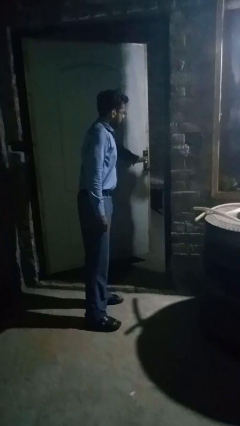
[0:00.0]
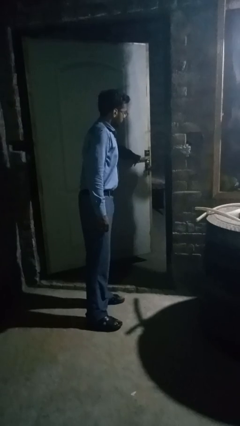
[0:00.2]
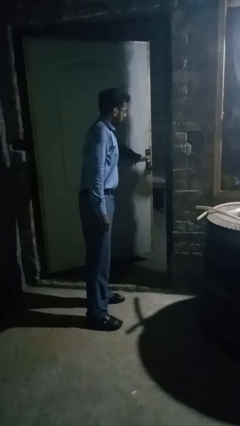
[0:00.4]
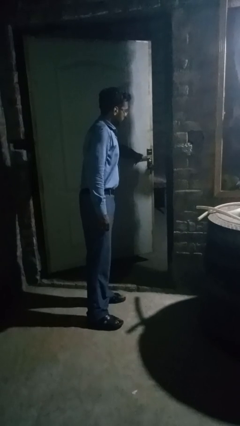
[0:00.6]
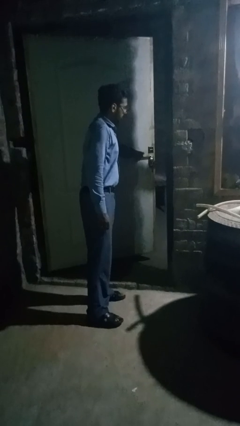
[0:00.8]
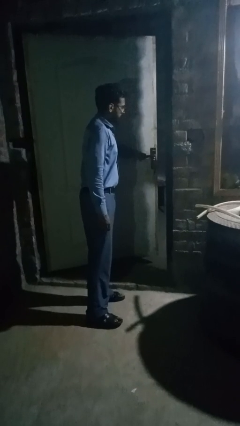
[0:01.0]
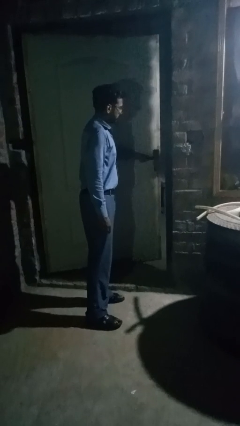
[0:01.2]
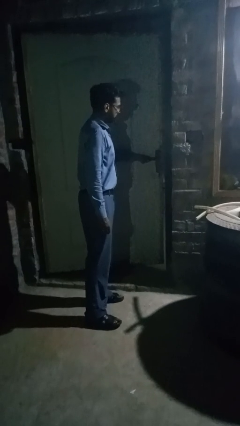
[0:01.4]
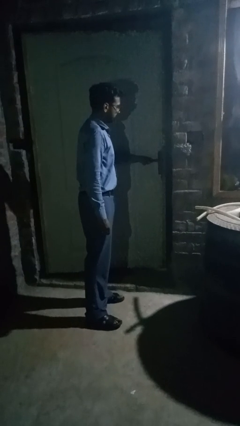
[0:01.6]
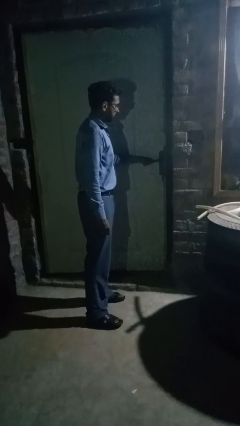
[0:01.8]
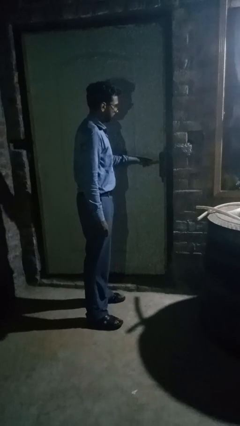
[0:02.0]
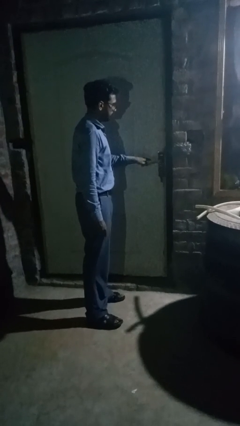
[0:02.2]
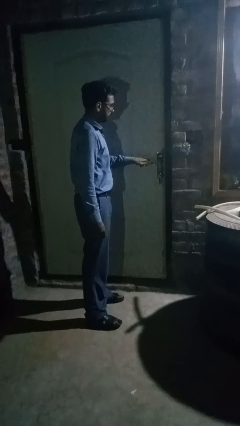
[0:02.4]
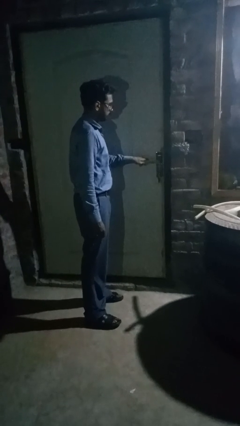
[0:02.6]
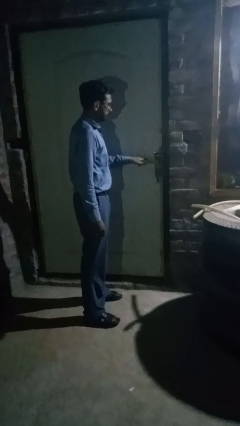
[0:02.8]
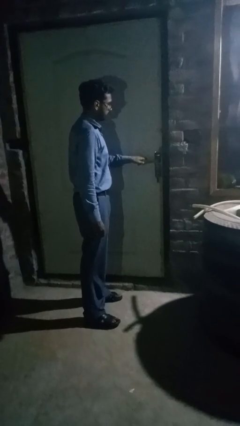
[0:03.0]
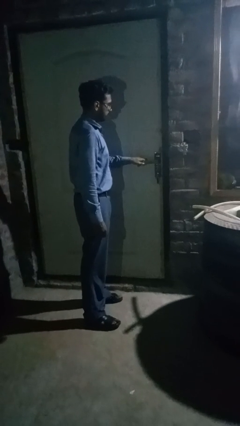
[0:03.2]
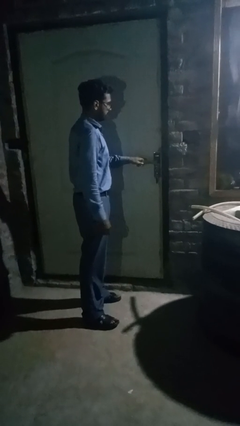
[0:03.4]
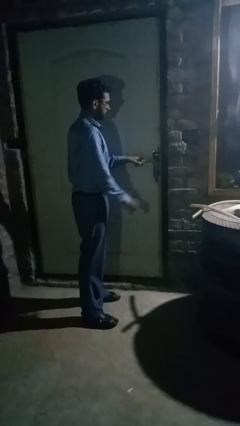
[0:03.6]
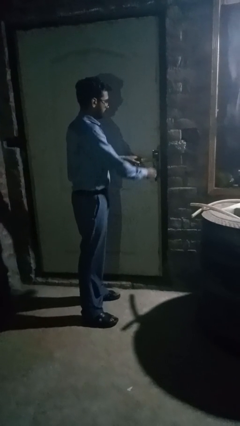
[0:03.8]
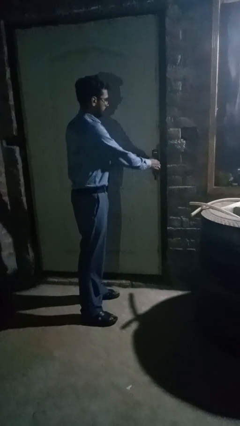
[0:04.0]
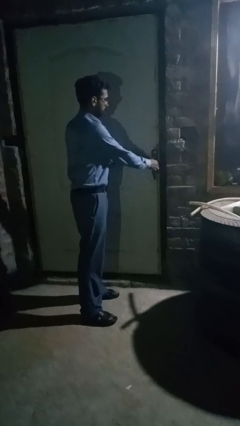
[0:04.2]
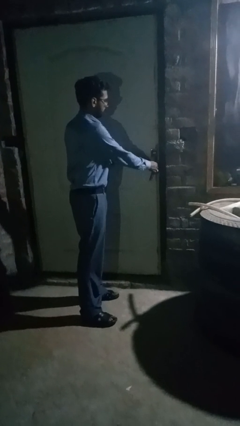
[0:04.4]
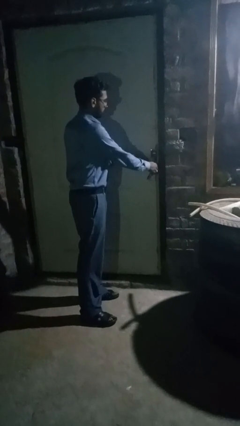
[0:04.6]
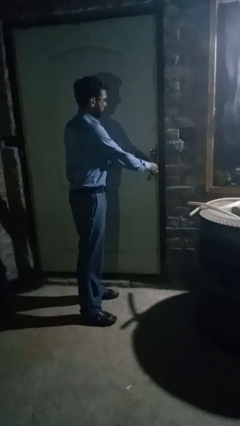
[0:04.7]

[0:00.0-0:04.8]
person closes facility door

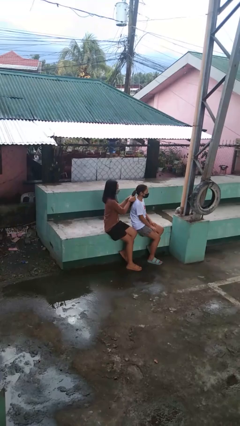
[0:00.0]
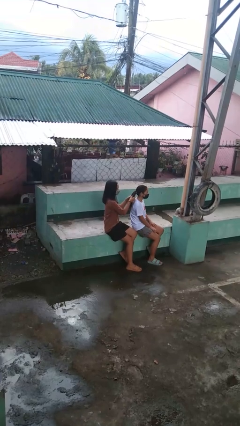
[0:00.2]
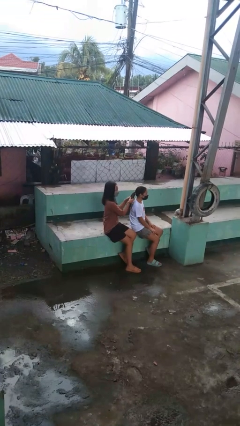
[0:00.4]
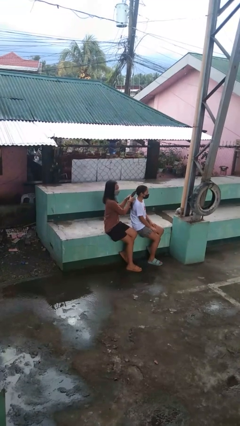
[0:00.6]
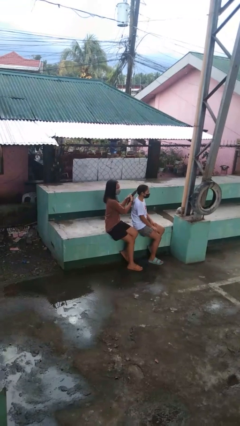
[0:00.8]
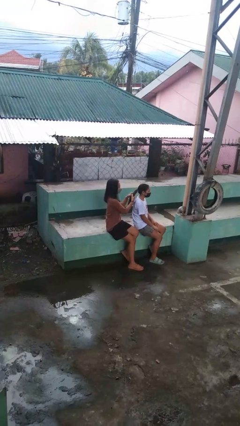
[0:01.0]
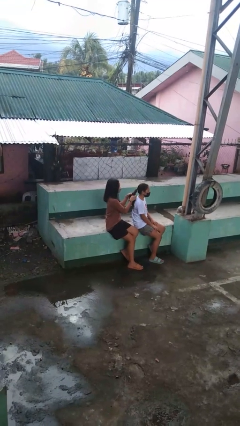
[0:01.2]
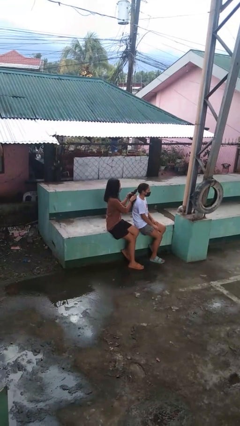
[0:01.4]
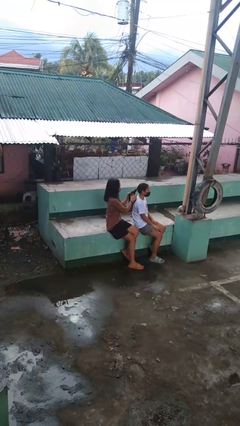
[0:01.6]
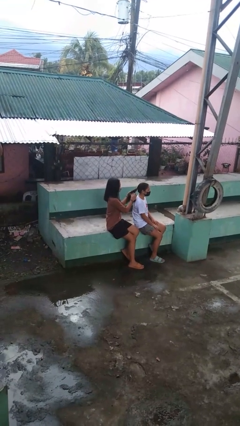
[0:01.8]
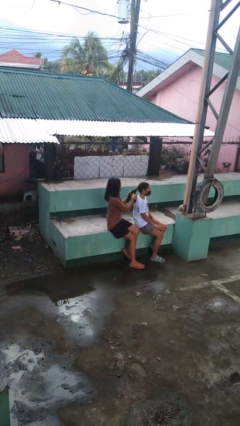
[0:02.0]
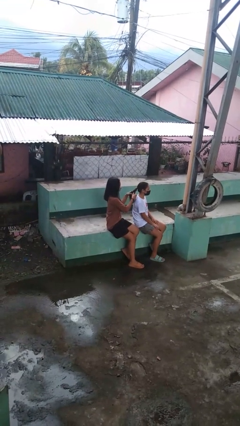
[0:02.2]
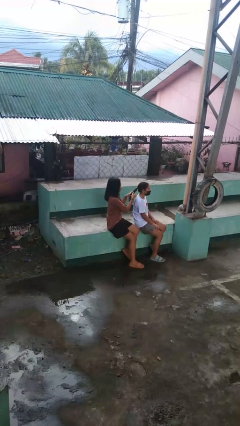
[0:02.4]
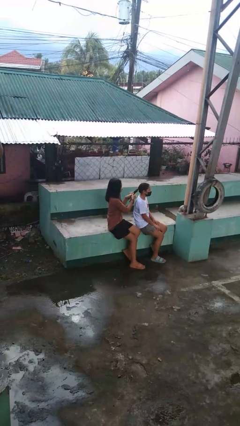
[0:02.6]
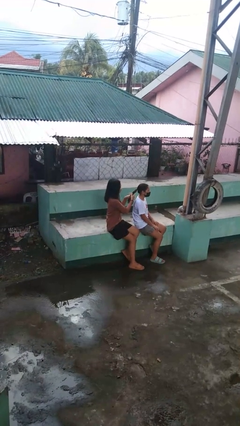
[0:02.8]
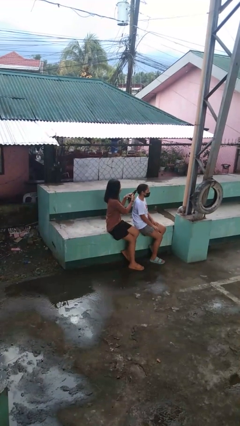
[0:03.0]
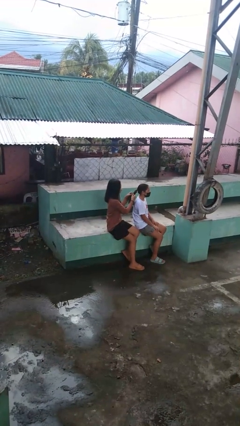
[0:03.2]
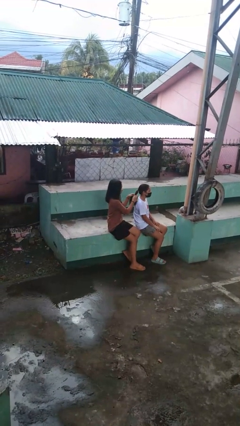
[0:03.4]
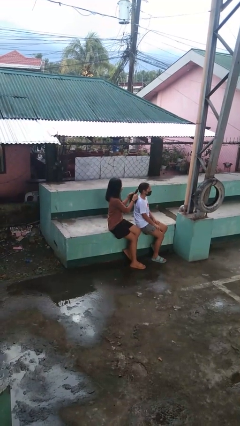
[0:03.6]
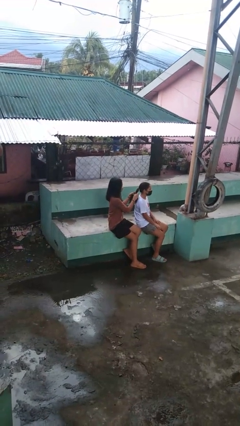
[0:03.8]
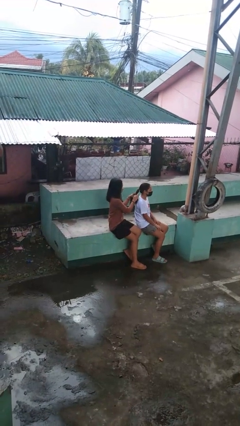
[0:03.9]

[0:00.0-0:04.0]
person braids hair of person

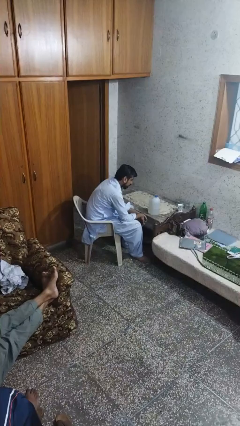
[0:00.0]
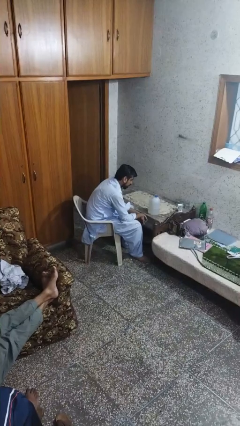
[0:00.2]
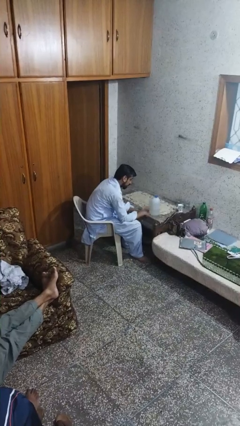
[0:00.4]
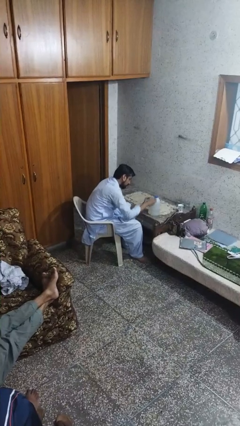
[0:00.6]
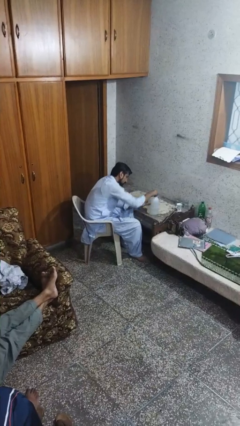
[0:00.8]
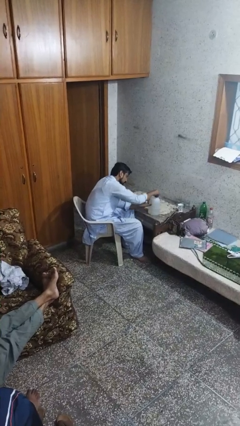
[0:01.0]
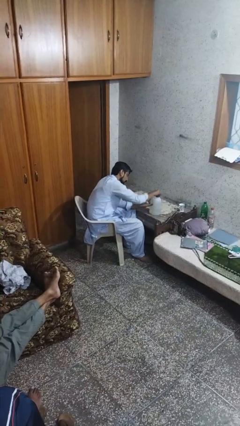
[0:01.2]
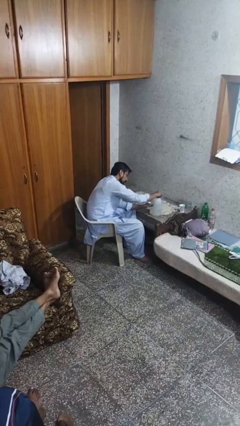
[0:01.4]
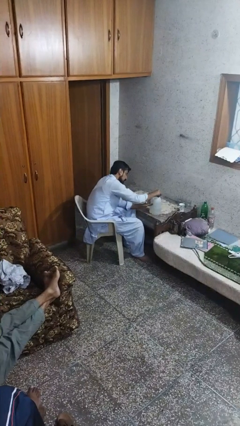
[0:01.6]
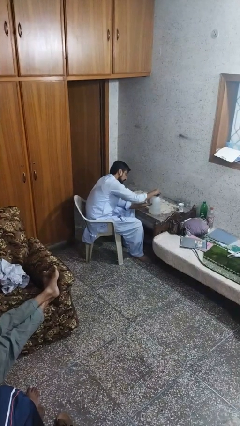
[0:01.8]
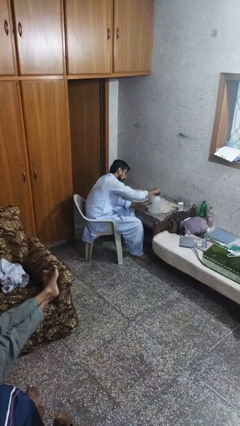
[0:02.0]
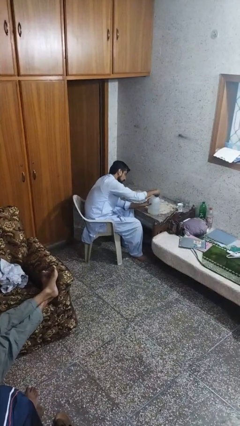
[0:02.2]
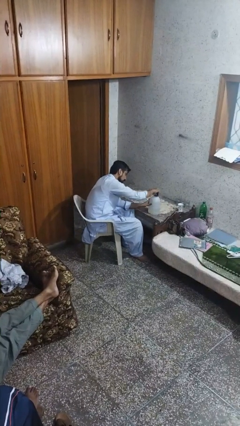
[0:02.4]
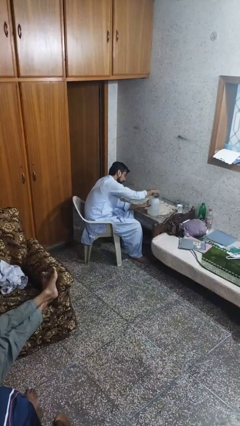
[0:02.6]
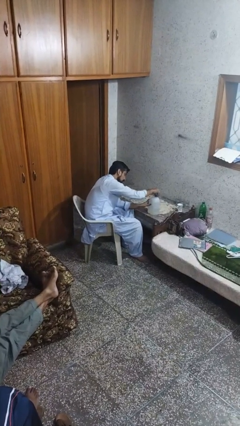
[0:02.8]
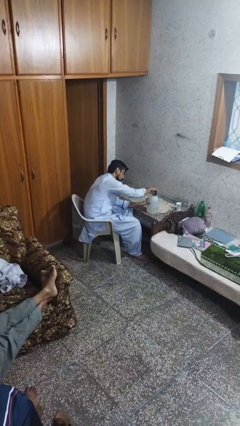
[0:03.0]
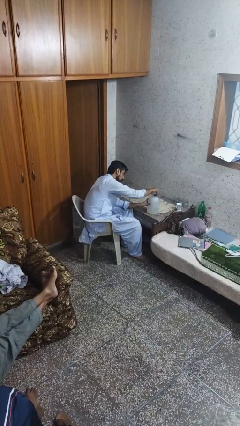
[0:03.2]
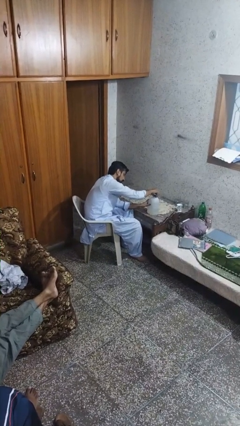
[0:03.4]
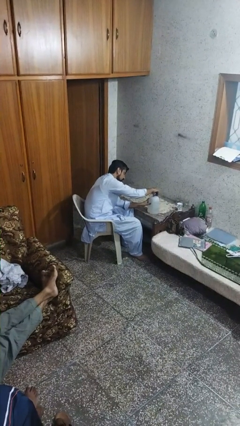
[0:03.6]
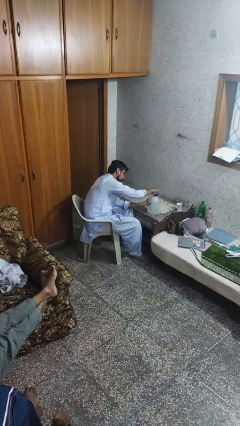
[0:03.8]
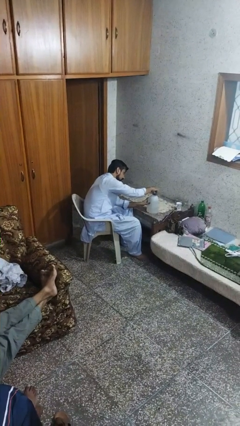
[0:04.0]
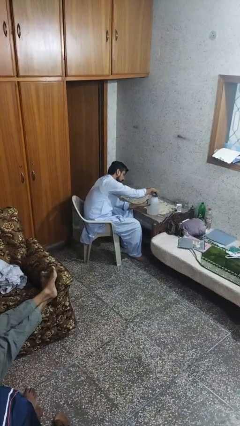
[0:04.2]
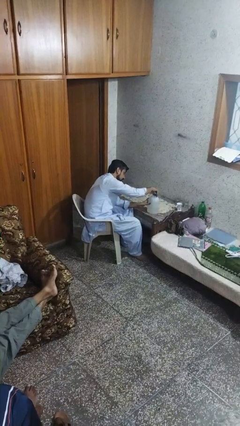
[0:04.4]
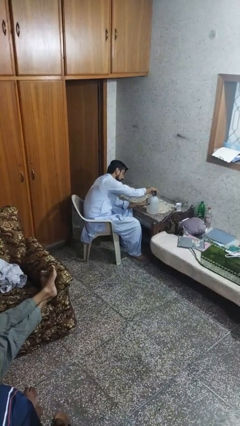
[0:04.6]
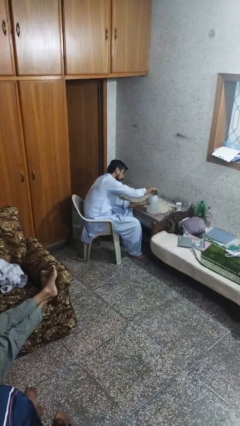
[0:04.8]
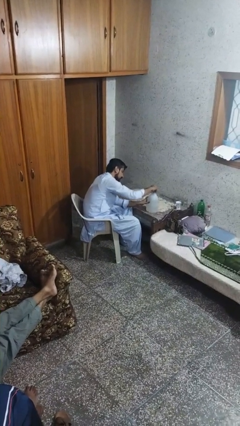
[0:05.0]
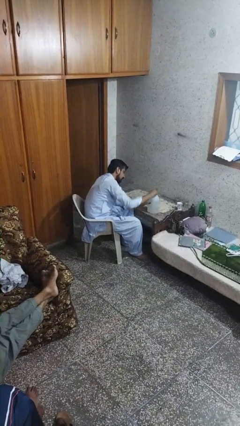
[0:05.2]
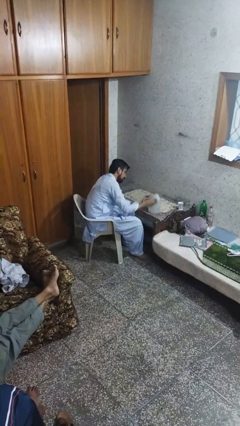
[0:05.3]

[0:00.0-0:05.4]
person unscrews lid from bottle

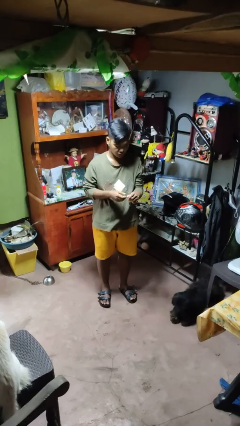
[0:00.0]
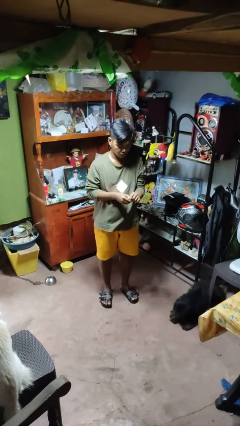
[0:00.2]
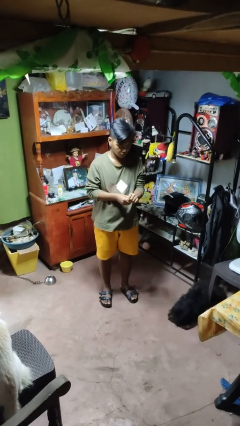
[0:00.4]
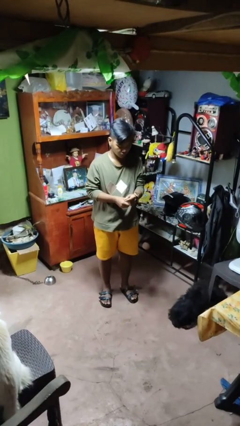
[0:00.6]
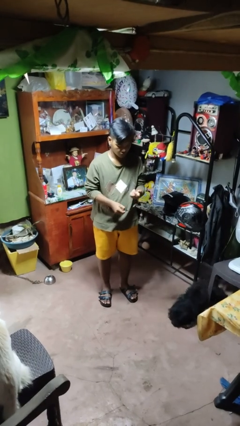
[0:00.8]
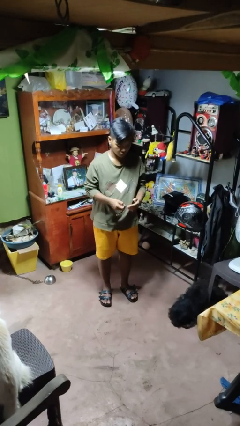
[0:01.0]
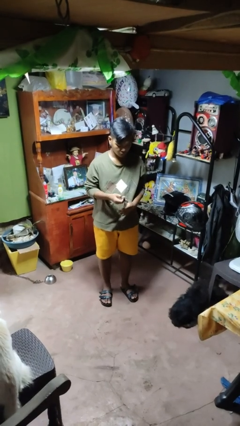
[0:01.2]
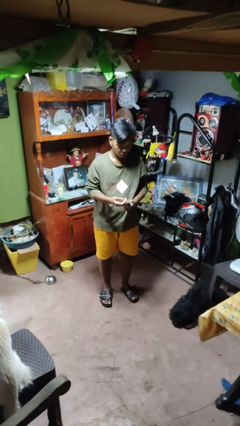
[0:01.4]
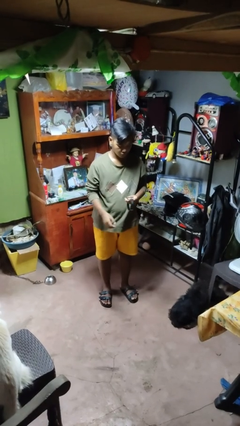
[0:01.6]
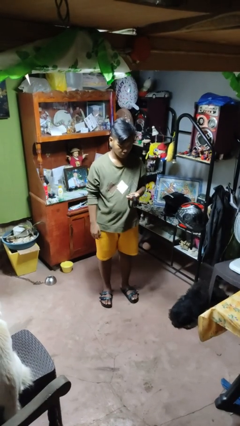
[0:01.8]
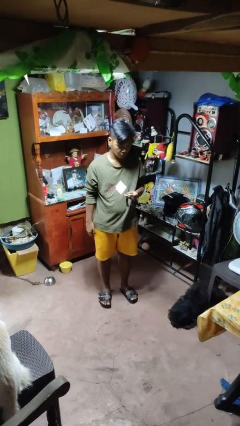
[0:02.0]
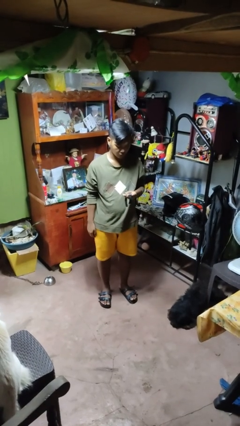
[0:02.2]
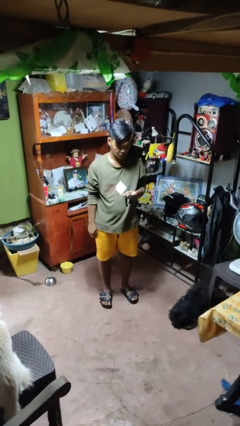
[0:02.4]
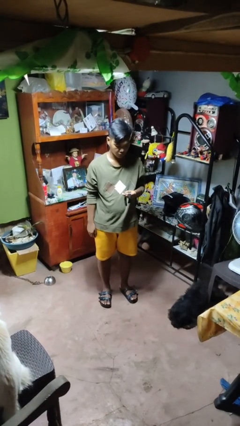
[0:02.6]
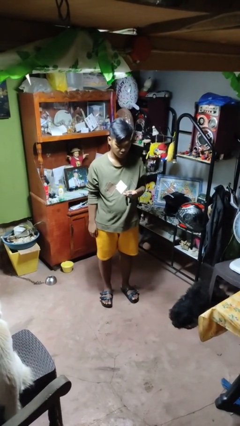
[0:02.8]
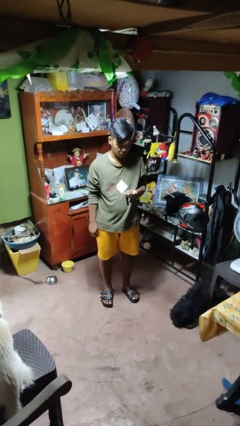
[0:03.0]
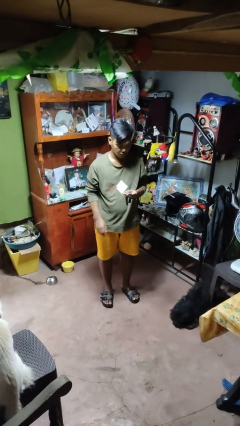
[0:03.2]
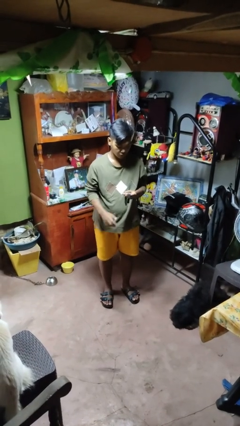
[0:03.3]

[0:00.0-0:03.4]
person takes off wristwatch

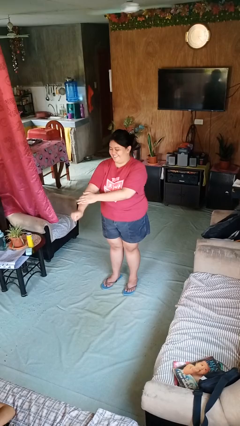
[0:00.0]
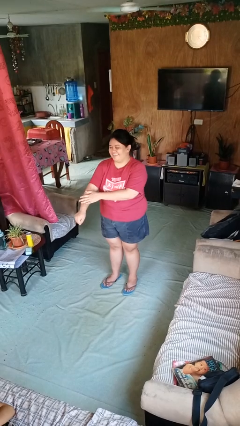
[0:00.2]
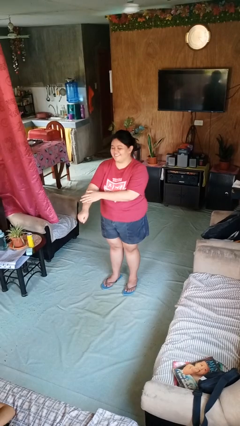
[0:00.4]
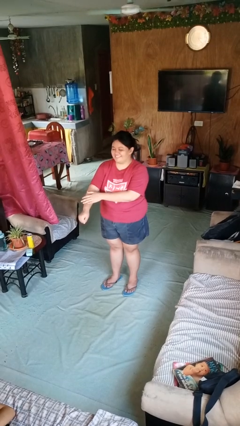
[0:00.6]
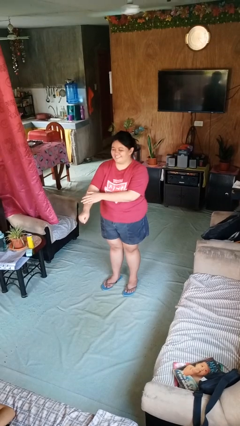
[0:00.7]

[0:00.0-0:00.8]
person swats bug
